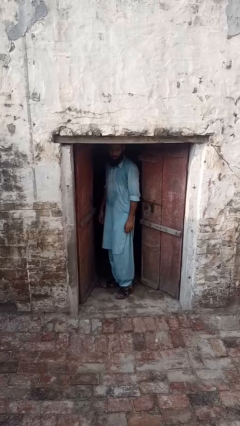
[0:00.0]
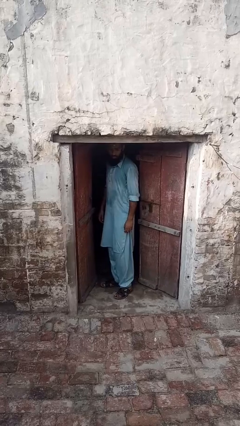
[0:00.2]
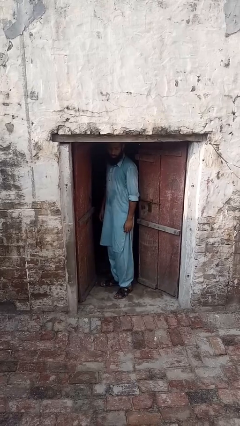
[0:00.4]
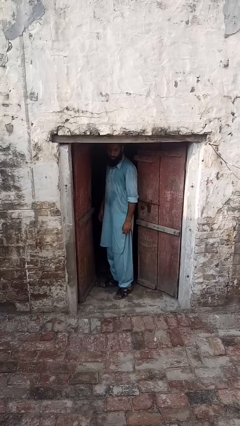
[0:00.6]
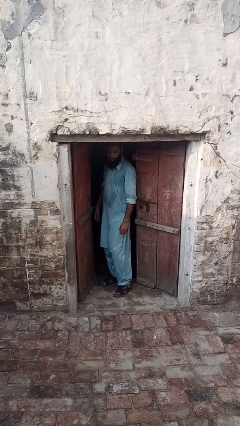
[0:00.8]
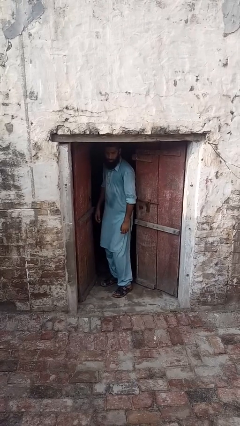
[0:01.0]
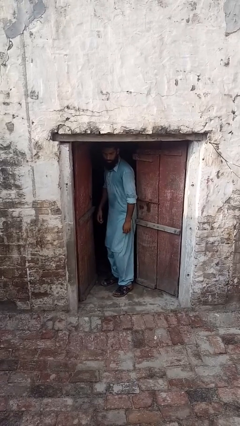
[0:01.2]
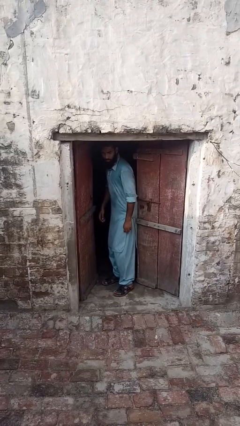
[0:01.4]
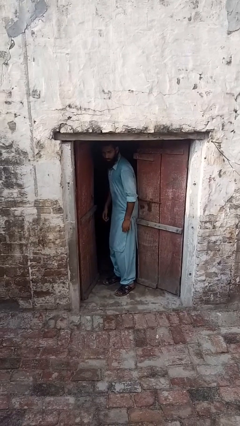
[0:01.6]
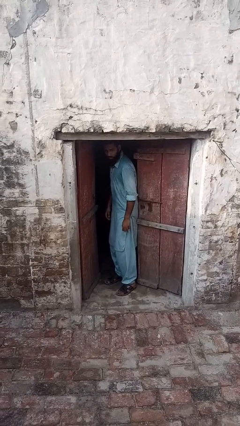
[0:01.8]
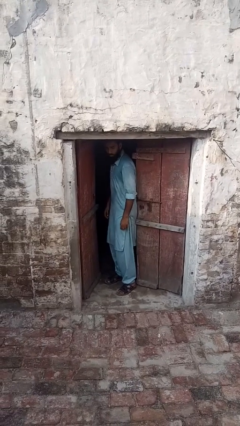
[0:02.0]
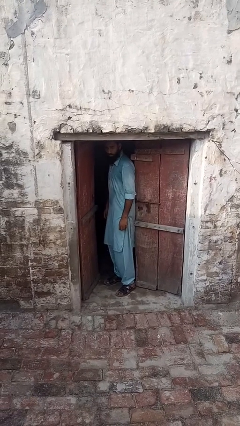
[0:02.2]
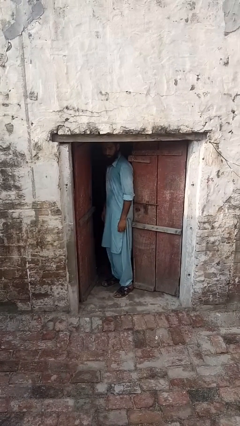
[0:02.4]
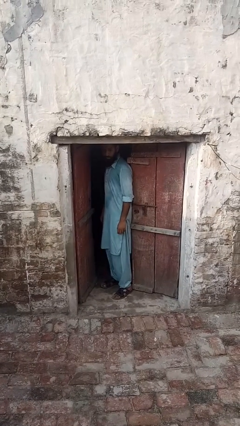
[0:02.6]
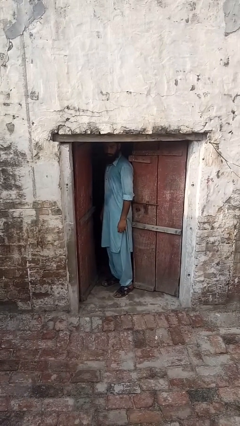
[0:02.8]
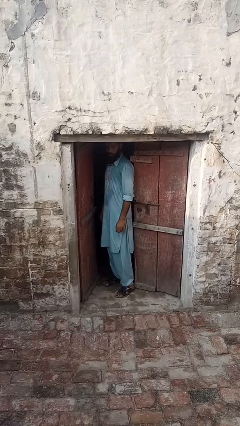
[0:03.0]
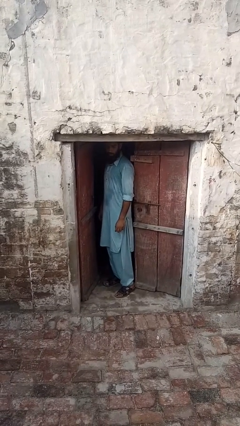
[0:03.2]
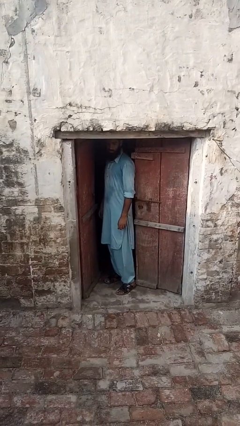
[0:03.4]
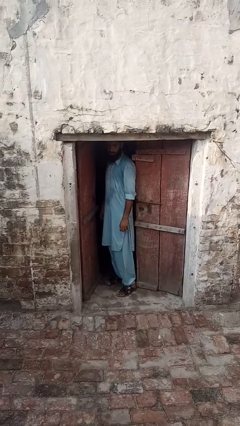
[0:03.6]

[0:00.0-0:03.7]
person closes door with hip

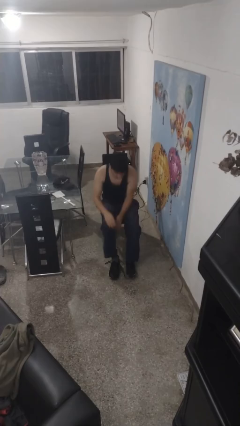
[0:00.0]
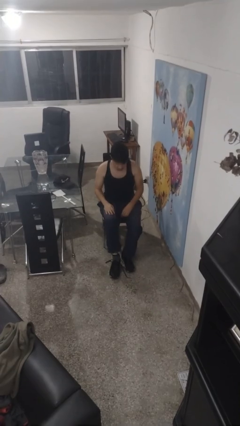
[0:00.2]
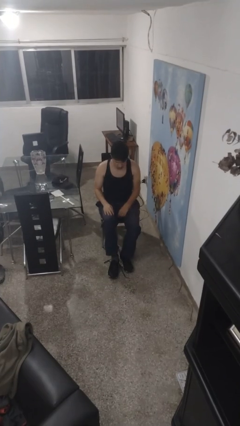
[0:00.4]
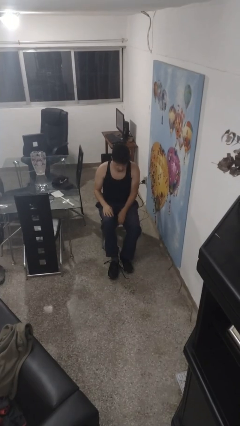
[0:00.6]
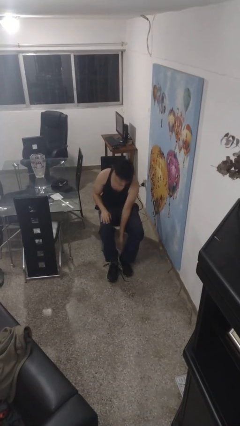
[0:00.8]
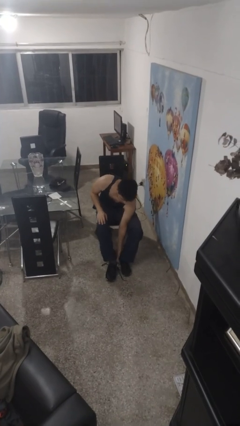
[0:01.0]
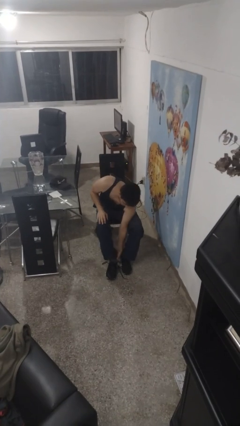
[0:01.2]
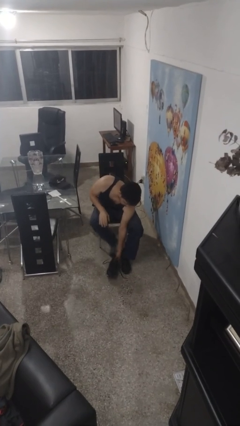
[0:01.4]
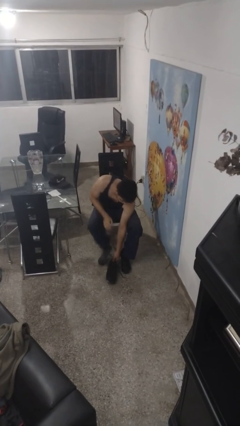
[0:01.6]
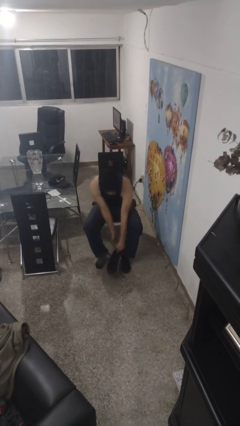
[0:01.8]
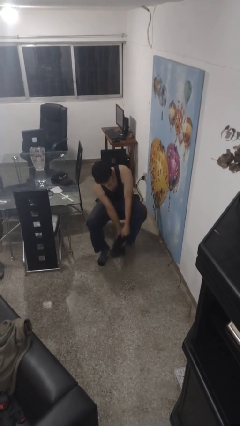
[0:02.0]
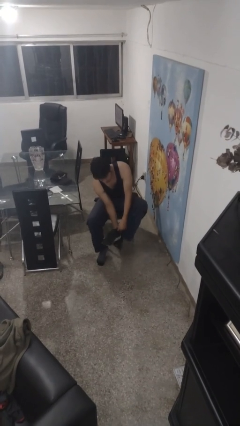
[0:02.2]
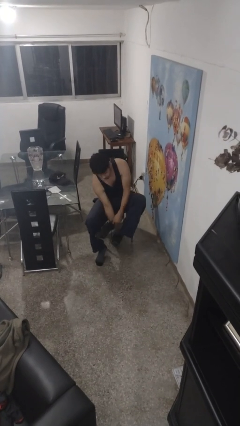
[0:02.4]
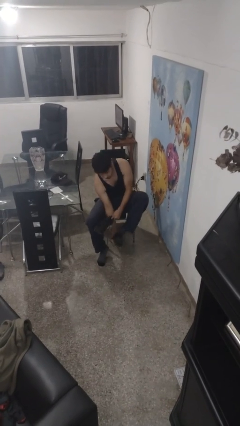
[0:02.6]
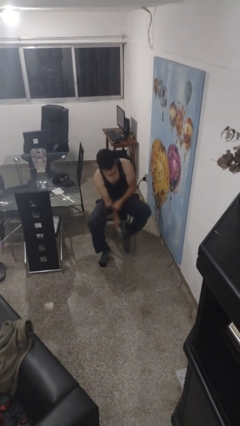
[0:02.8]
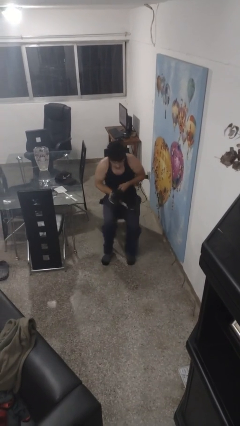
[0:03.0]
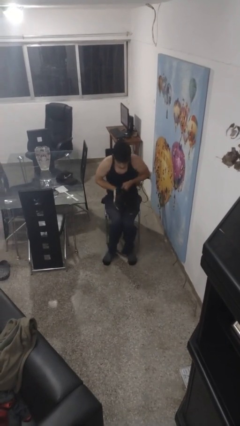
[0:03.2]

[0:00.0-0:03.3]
person takes off shoes

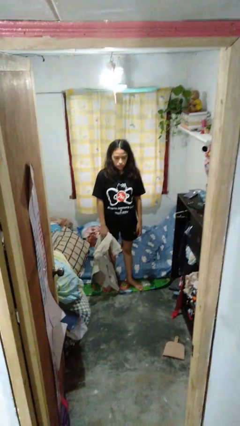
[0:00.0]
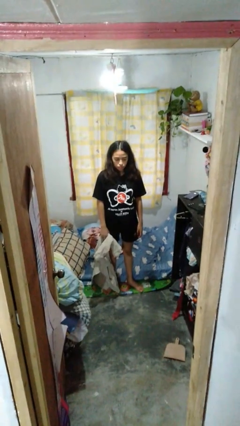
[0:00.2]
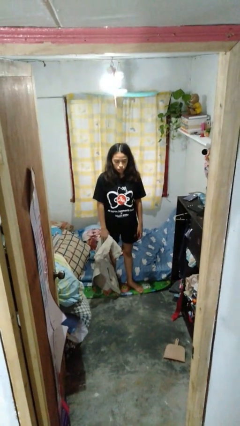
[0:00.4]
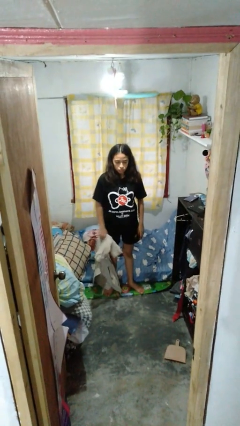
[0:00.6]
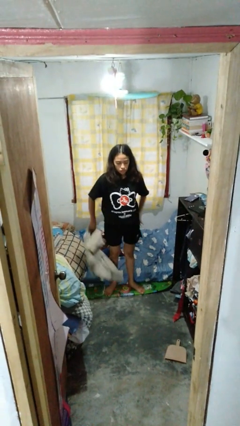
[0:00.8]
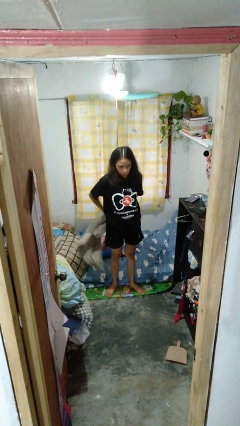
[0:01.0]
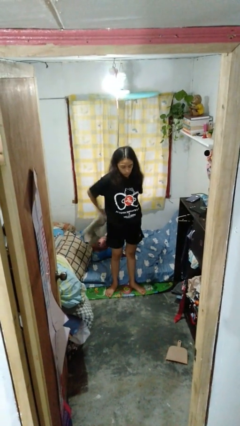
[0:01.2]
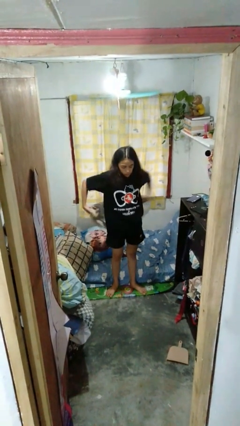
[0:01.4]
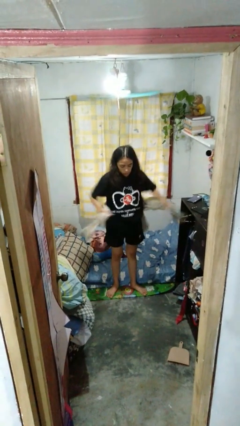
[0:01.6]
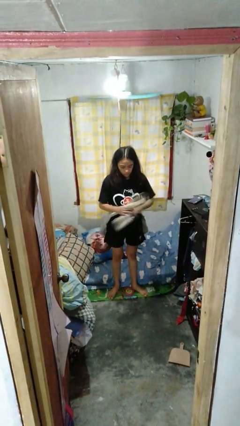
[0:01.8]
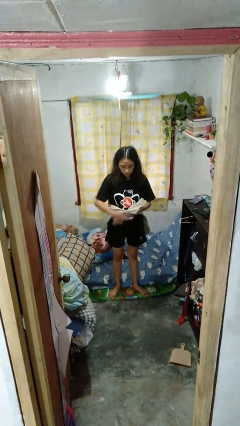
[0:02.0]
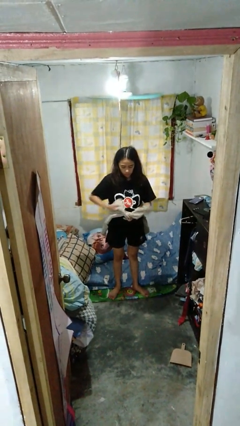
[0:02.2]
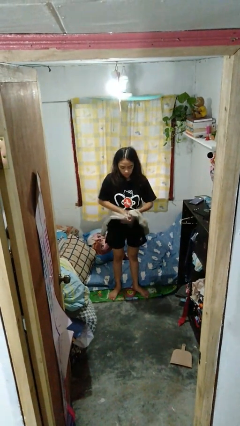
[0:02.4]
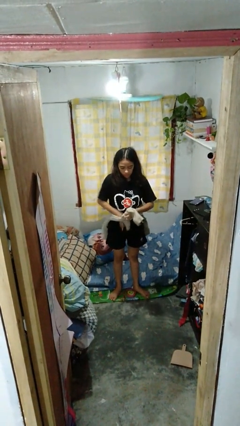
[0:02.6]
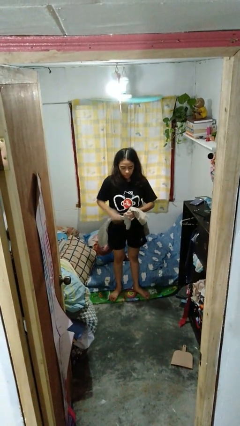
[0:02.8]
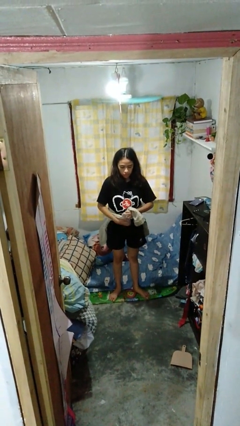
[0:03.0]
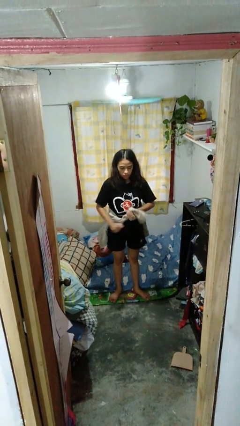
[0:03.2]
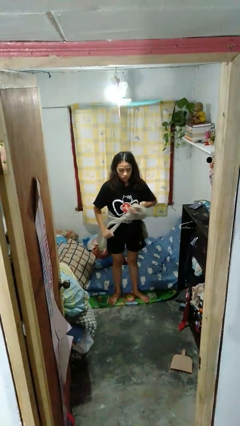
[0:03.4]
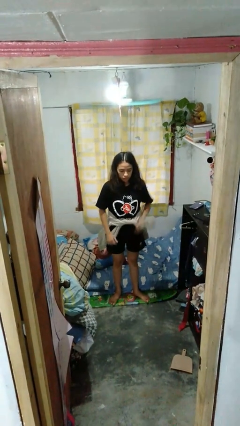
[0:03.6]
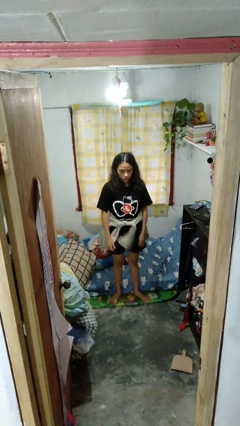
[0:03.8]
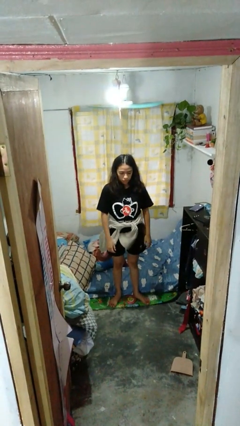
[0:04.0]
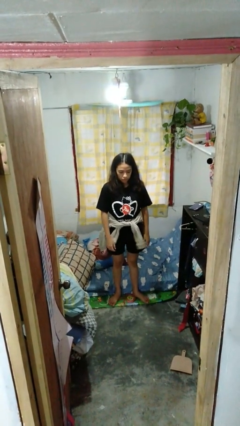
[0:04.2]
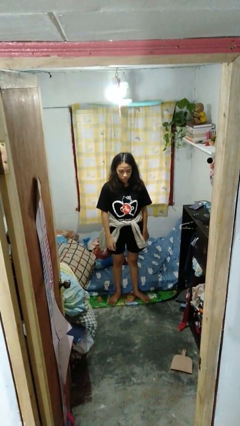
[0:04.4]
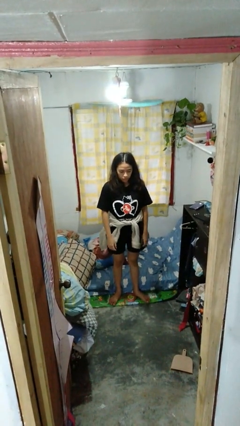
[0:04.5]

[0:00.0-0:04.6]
person ties jacket around waist

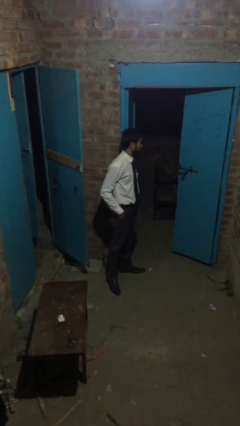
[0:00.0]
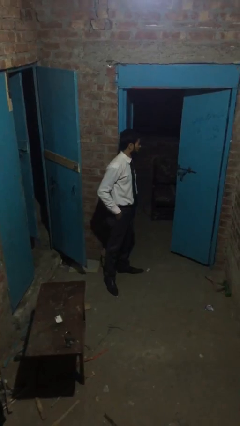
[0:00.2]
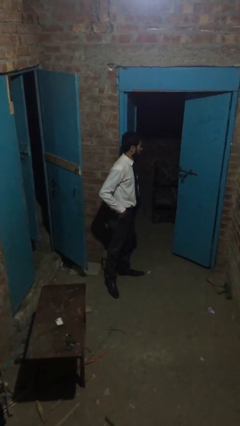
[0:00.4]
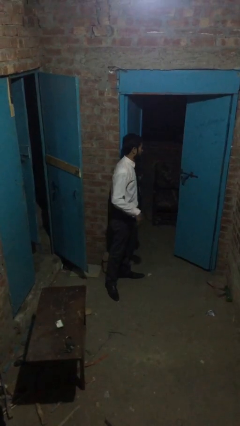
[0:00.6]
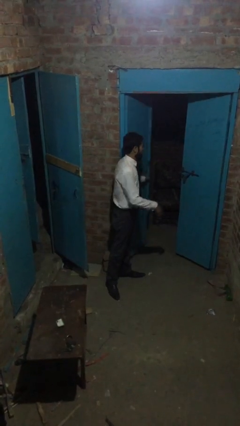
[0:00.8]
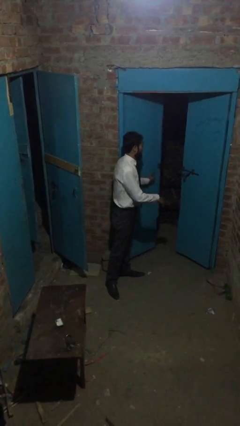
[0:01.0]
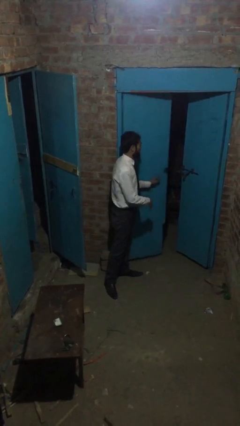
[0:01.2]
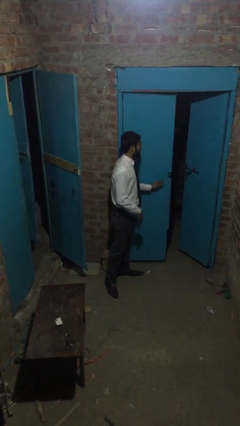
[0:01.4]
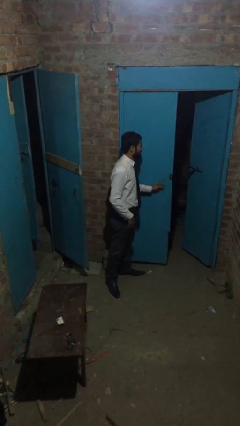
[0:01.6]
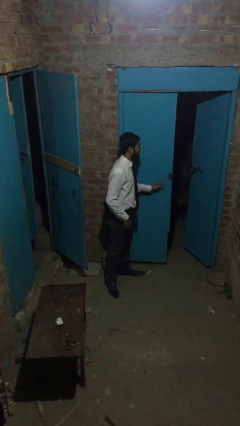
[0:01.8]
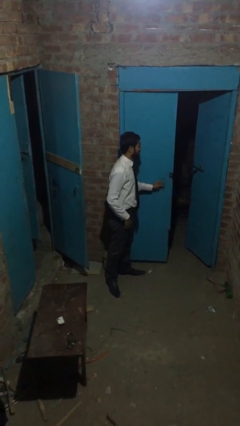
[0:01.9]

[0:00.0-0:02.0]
person closes facility door

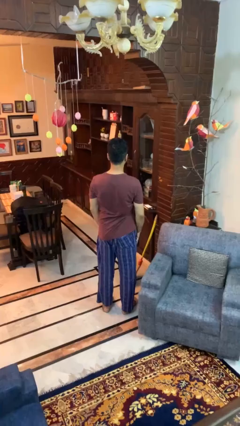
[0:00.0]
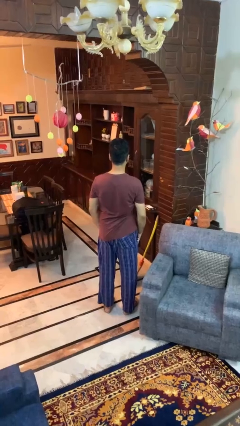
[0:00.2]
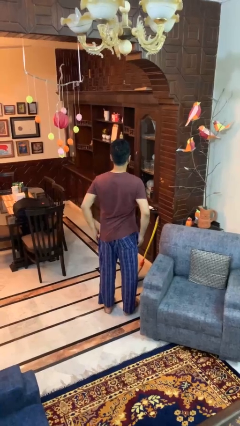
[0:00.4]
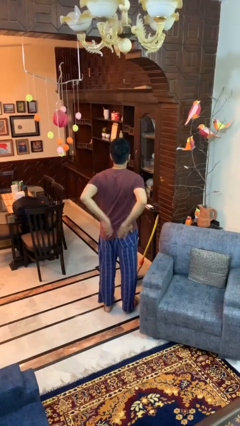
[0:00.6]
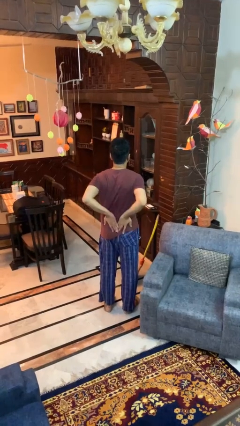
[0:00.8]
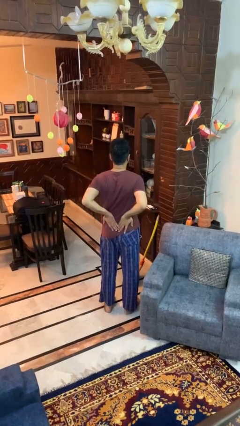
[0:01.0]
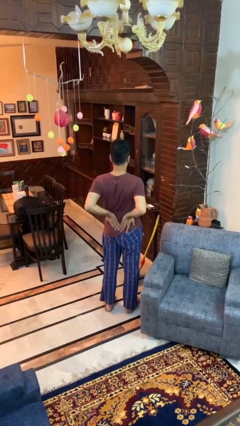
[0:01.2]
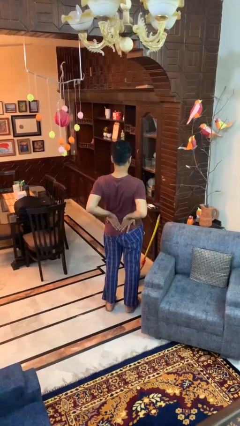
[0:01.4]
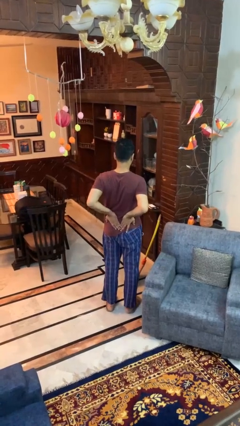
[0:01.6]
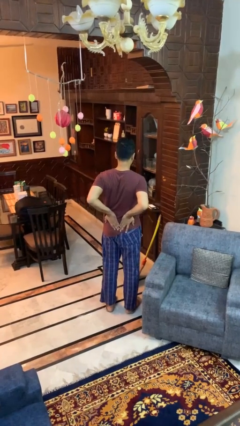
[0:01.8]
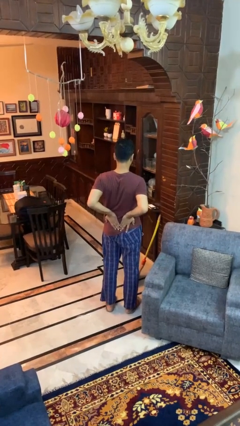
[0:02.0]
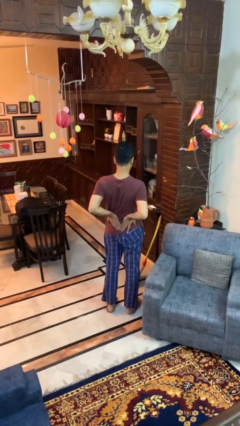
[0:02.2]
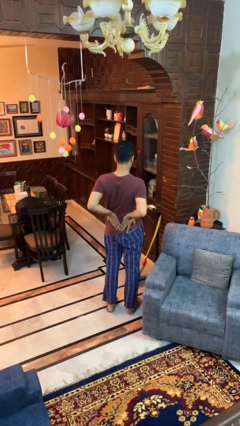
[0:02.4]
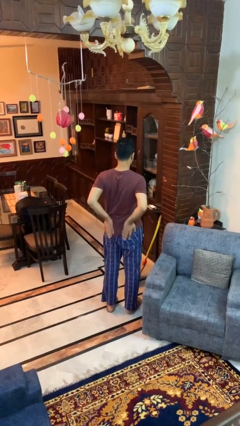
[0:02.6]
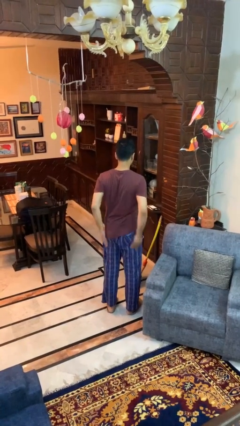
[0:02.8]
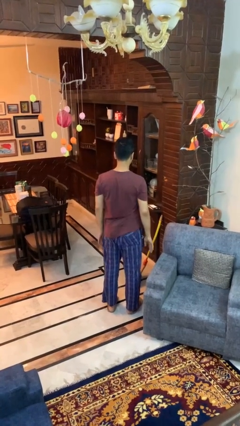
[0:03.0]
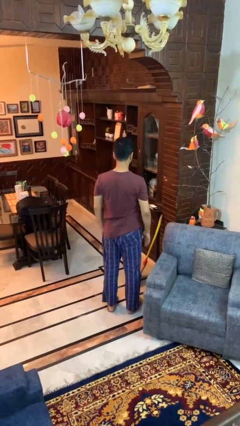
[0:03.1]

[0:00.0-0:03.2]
person stretches back

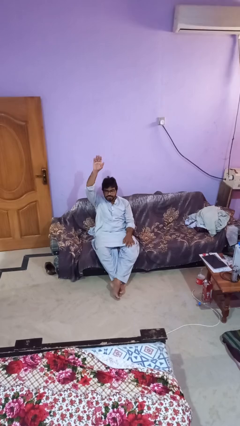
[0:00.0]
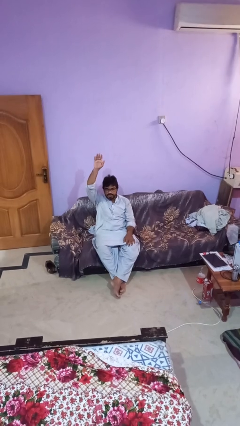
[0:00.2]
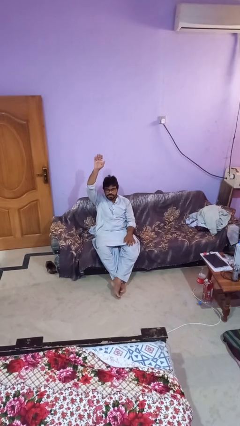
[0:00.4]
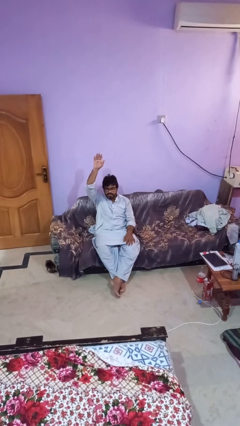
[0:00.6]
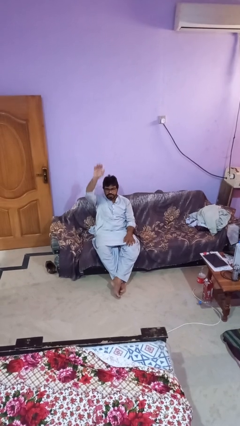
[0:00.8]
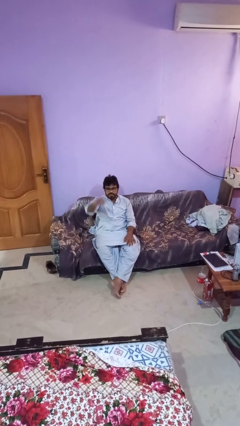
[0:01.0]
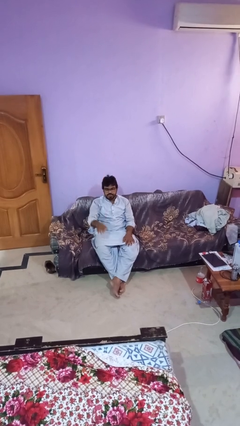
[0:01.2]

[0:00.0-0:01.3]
person gestures lower hand
